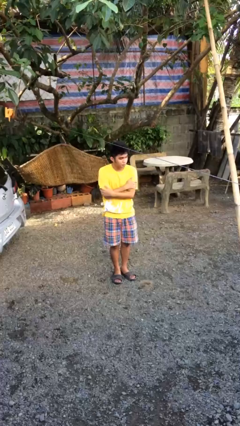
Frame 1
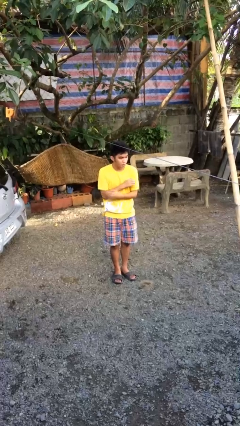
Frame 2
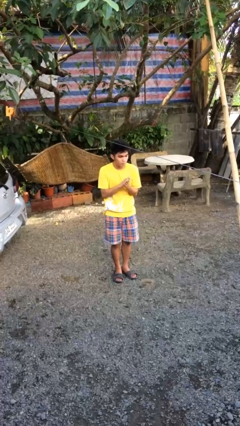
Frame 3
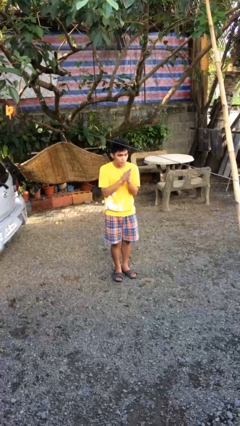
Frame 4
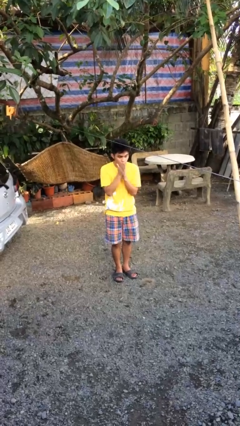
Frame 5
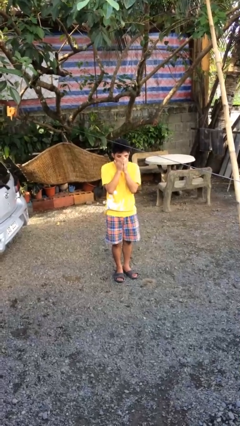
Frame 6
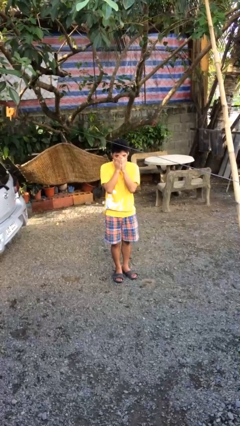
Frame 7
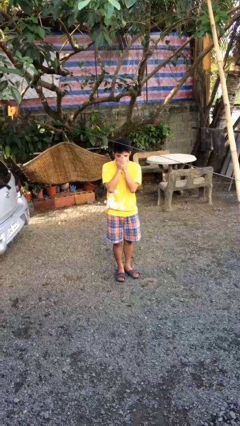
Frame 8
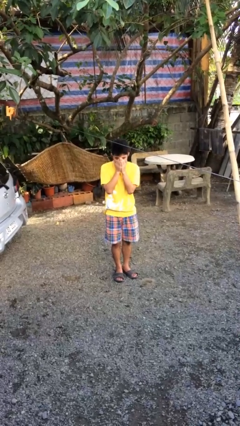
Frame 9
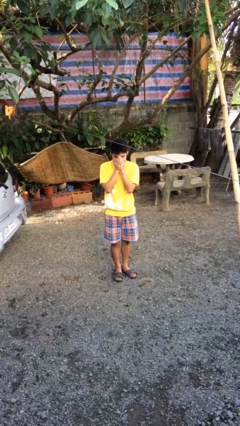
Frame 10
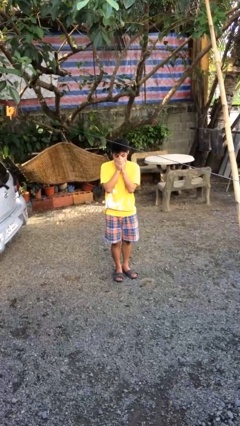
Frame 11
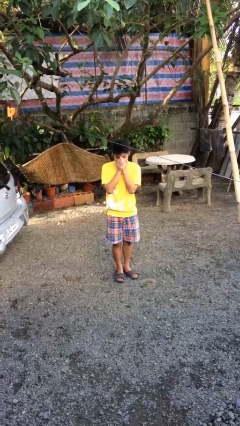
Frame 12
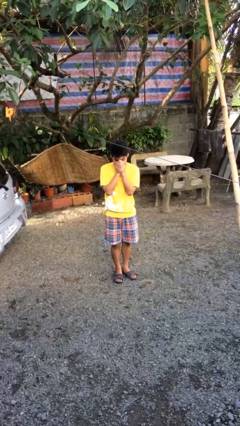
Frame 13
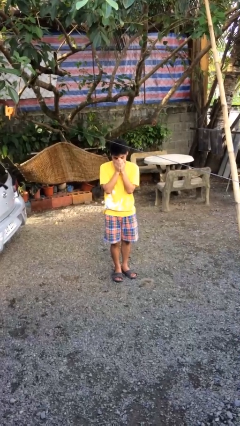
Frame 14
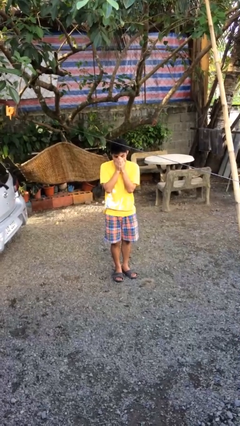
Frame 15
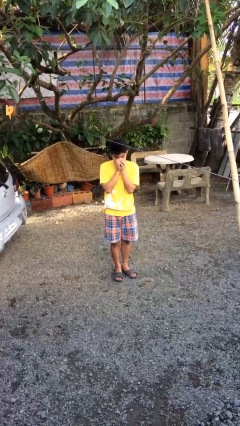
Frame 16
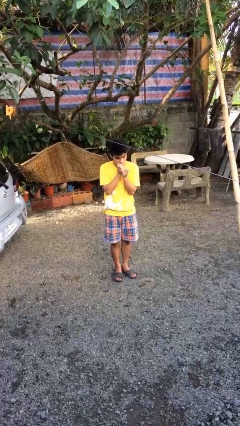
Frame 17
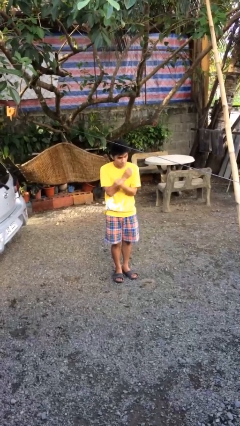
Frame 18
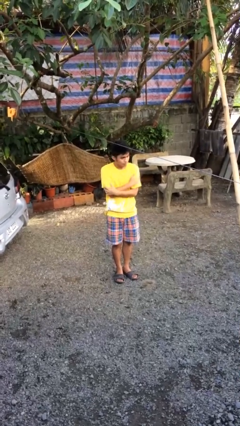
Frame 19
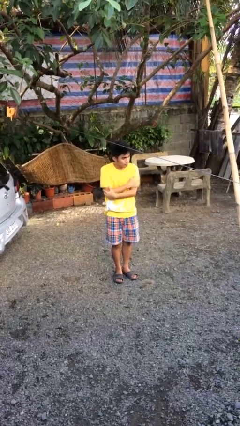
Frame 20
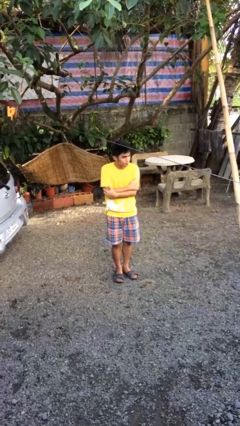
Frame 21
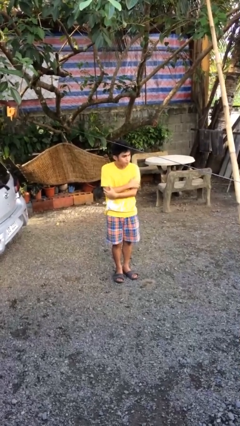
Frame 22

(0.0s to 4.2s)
person blows into hands

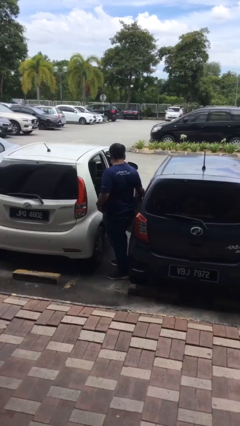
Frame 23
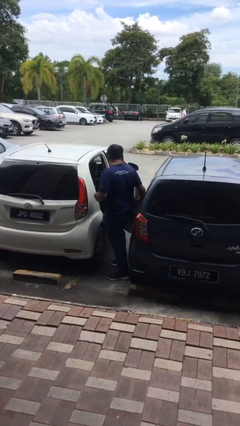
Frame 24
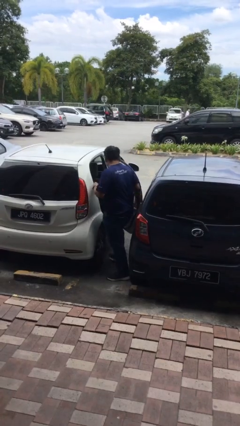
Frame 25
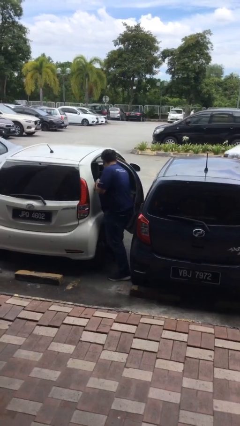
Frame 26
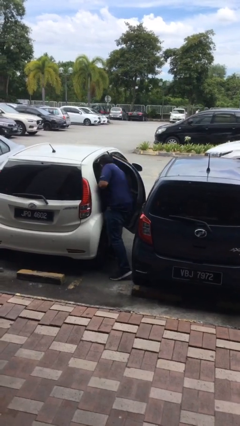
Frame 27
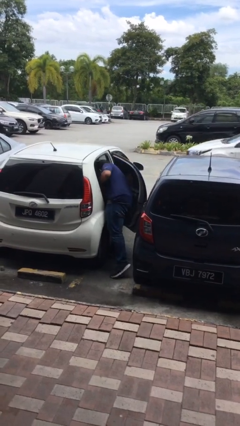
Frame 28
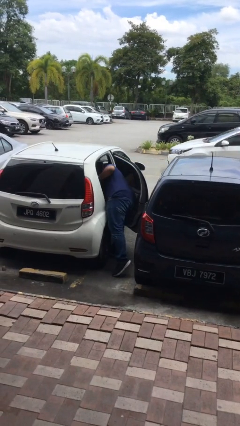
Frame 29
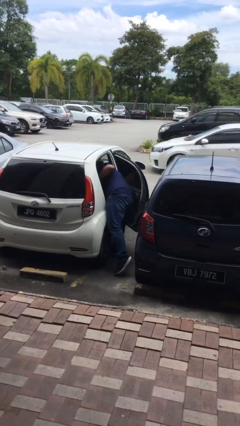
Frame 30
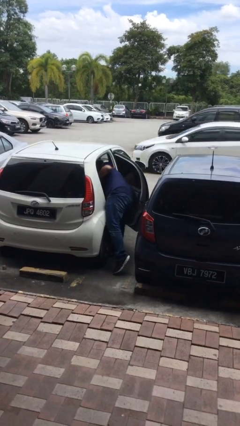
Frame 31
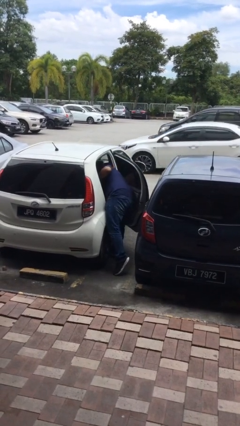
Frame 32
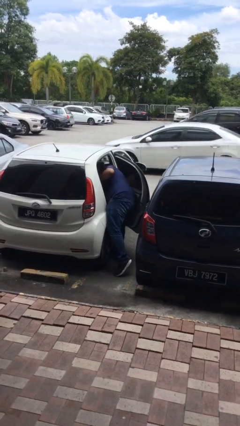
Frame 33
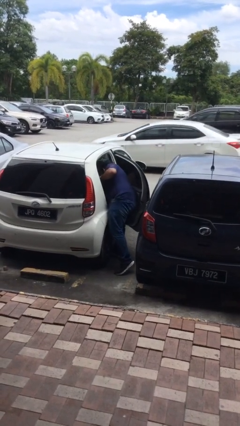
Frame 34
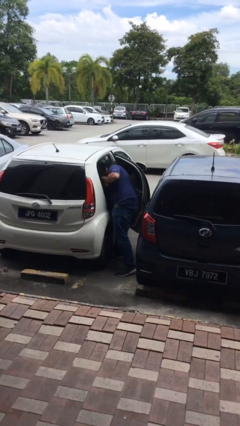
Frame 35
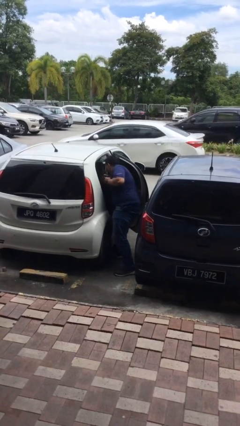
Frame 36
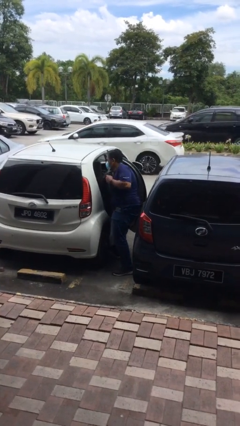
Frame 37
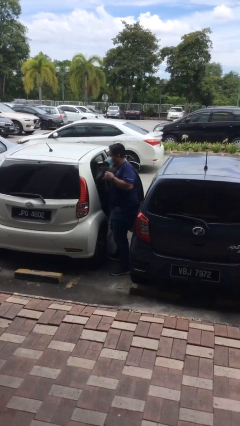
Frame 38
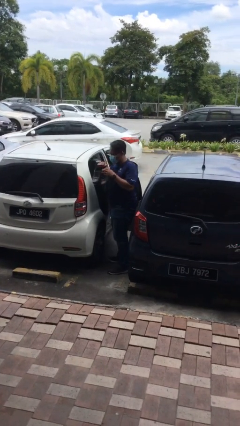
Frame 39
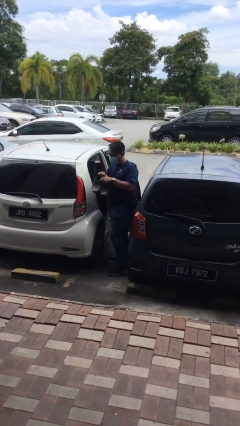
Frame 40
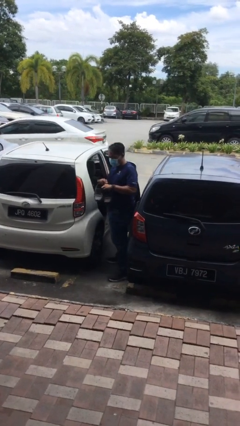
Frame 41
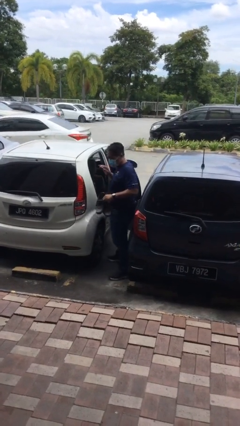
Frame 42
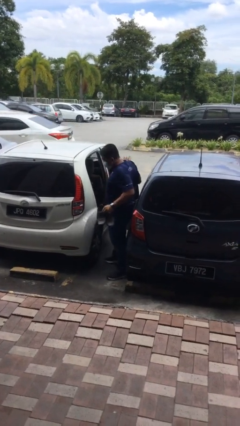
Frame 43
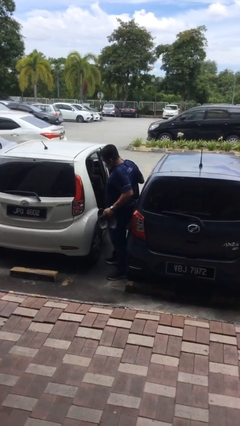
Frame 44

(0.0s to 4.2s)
person unloads car

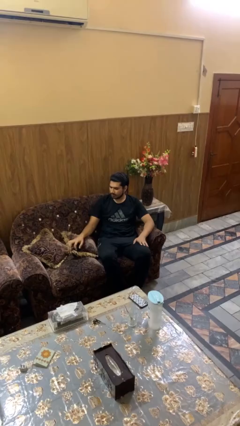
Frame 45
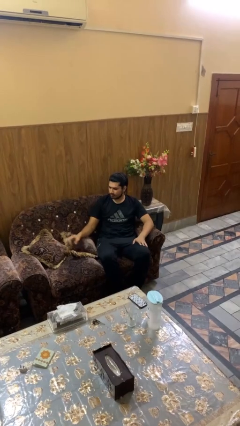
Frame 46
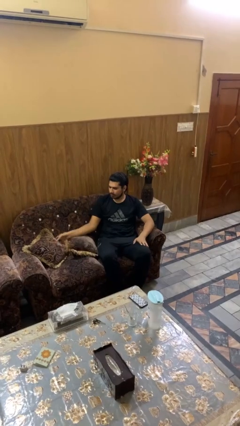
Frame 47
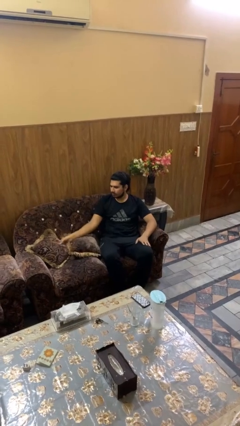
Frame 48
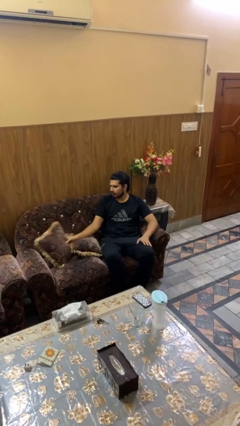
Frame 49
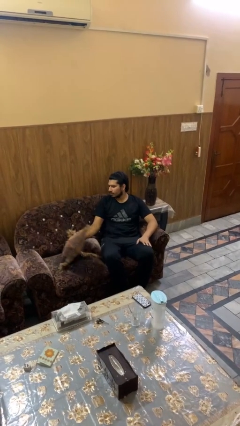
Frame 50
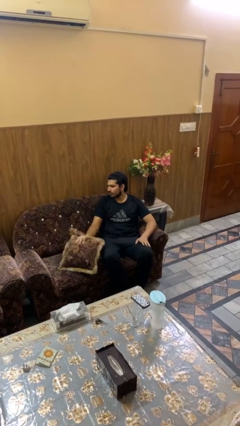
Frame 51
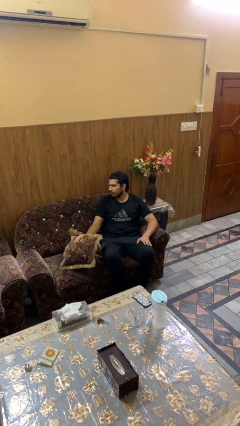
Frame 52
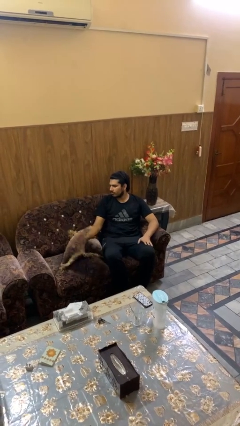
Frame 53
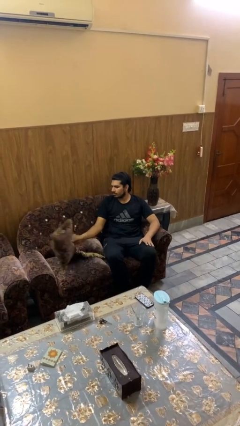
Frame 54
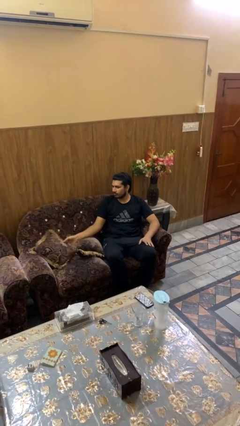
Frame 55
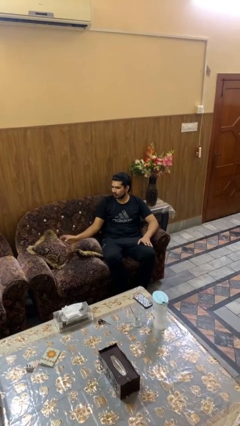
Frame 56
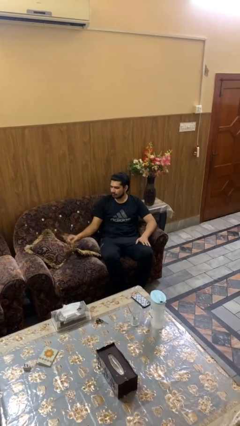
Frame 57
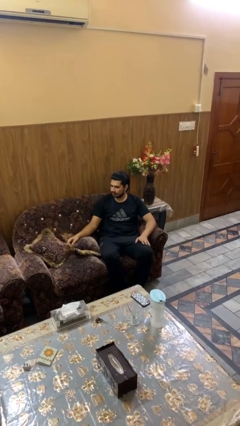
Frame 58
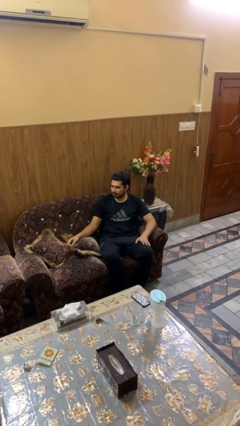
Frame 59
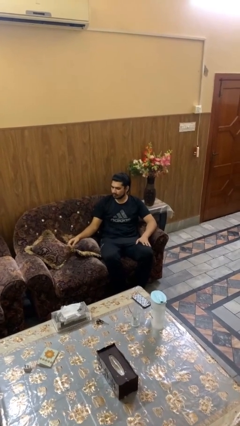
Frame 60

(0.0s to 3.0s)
person searches in couch

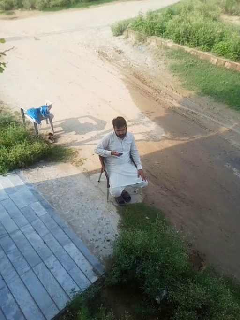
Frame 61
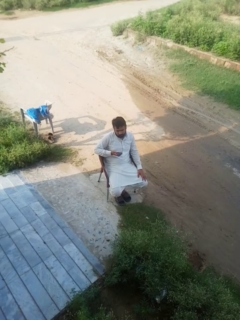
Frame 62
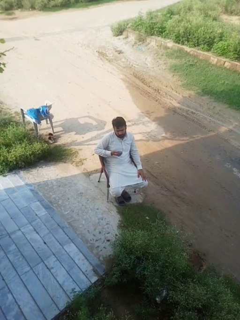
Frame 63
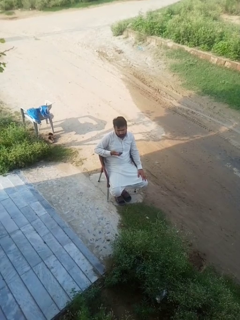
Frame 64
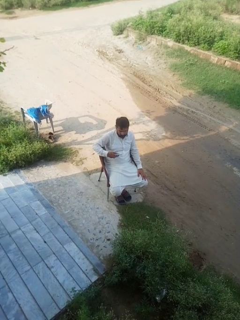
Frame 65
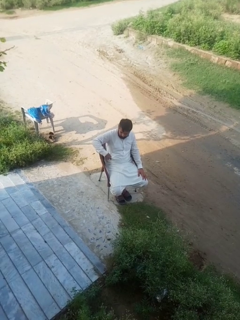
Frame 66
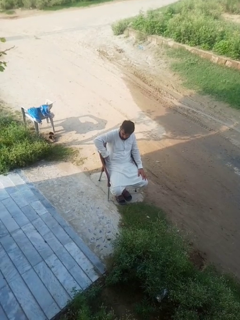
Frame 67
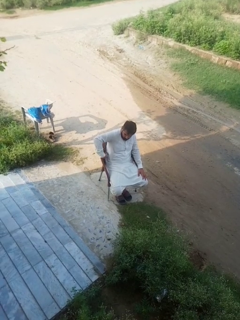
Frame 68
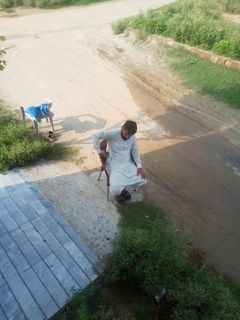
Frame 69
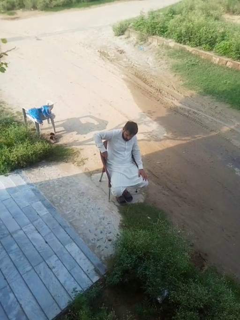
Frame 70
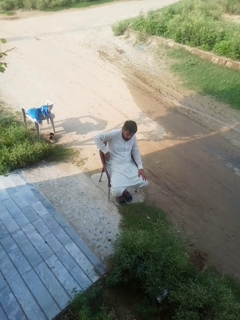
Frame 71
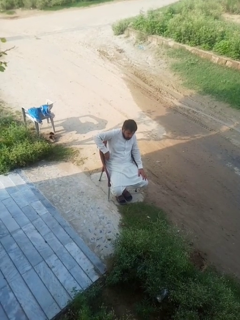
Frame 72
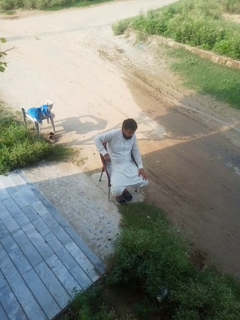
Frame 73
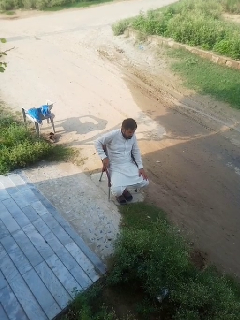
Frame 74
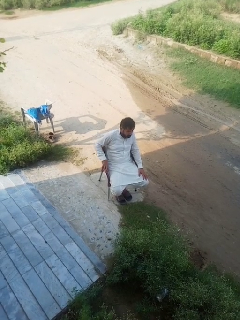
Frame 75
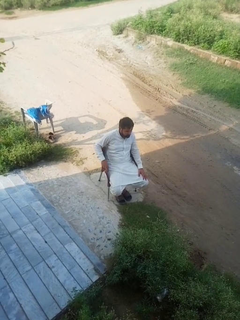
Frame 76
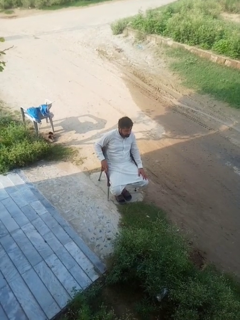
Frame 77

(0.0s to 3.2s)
person puts phone into pocket

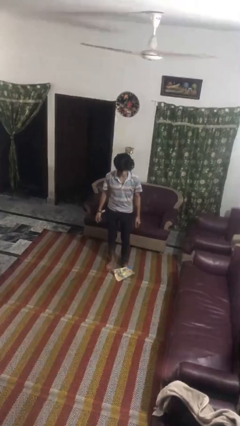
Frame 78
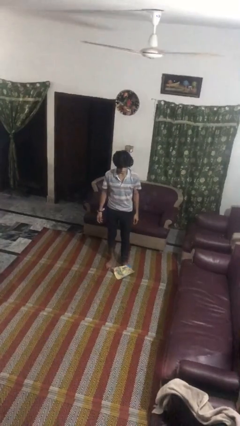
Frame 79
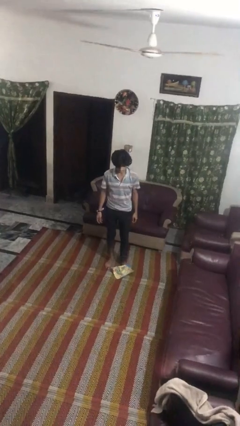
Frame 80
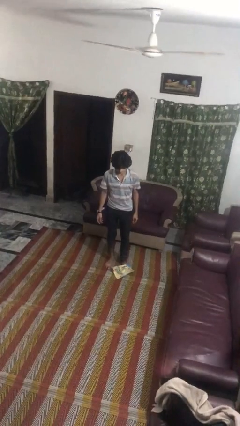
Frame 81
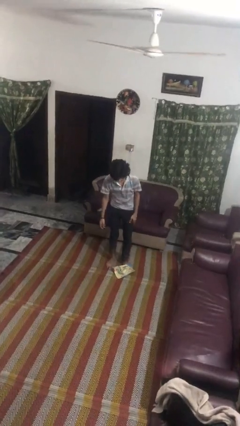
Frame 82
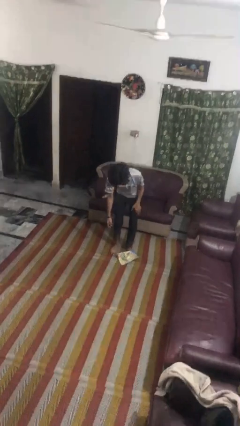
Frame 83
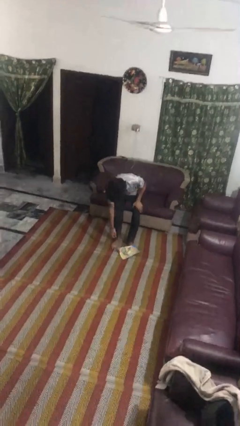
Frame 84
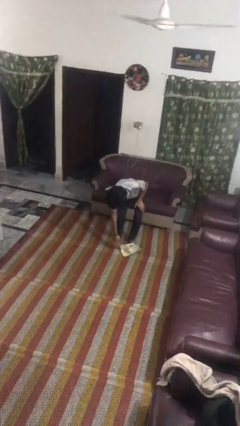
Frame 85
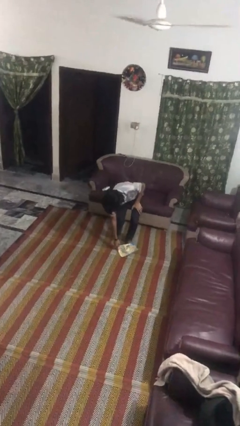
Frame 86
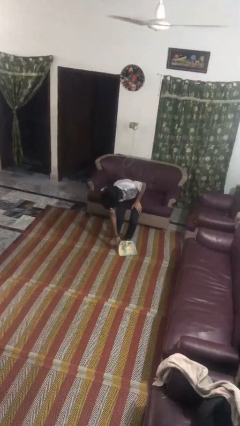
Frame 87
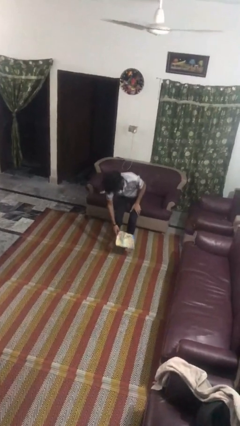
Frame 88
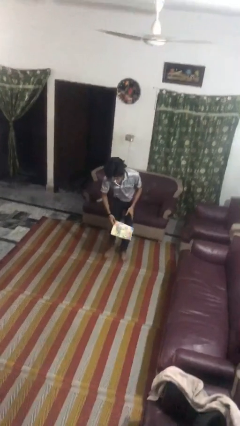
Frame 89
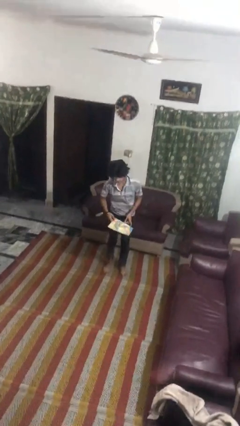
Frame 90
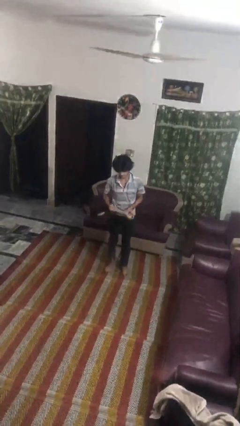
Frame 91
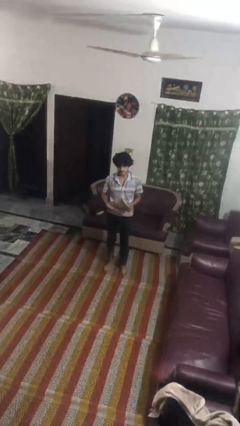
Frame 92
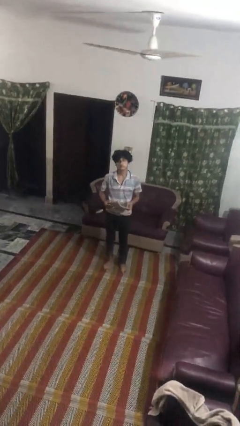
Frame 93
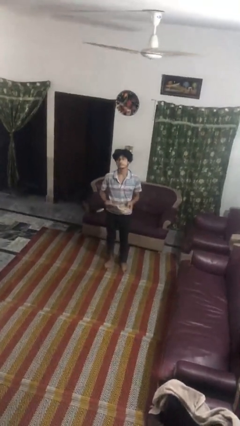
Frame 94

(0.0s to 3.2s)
person picks up object from floor

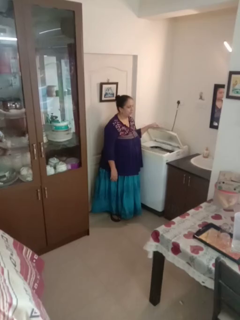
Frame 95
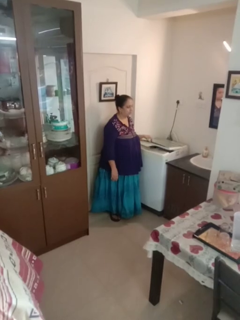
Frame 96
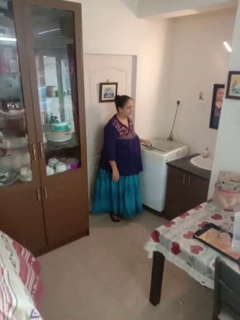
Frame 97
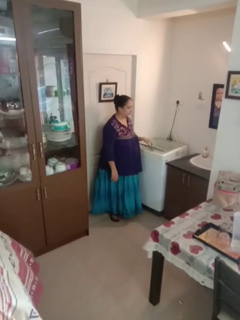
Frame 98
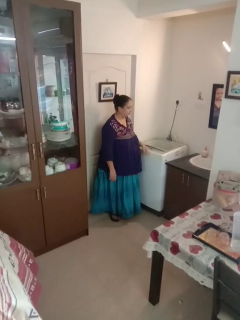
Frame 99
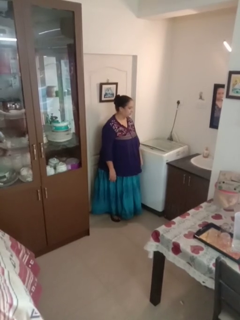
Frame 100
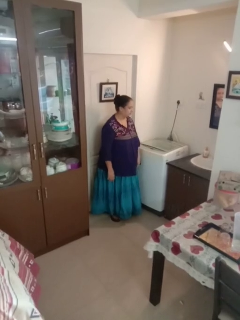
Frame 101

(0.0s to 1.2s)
person closes clothes washer
